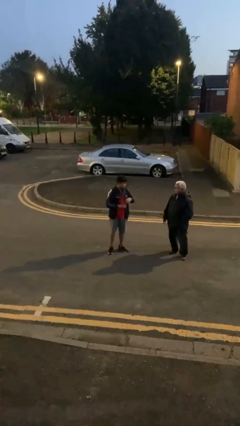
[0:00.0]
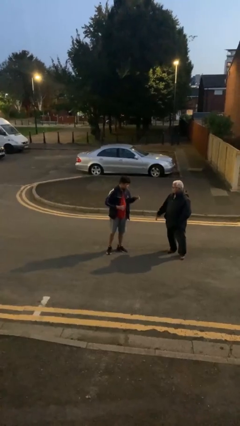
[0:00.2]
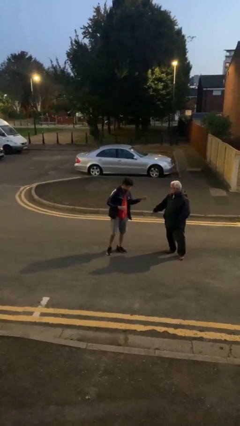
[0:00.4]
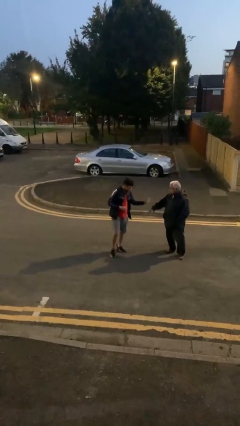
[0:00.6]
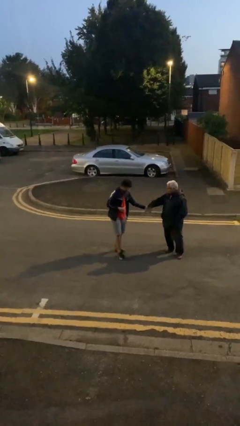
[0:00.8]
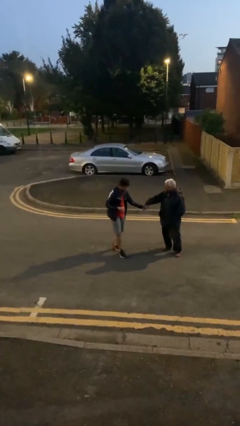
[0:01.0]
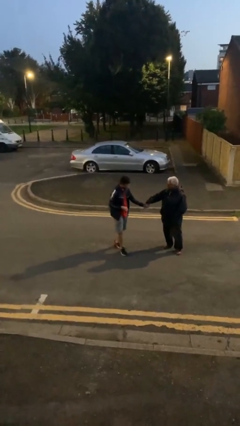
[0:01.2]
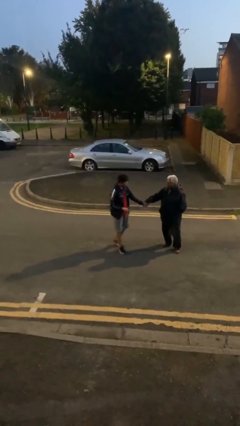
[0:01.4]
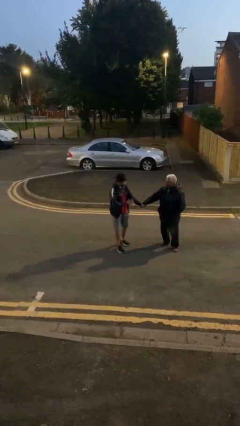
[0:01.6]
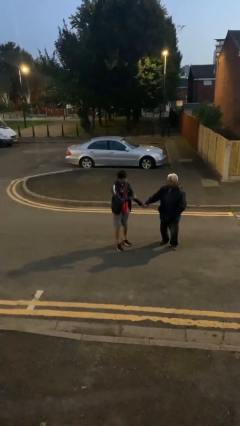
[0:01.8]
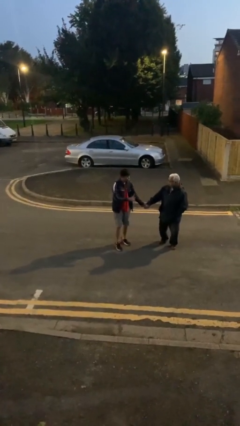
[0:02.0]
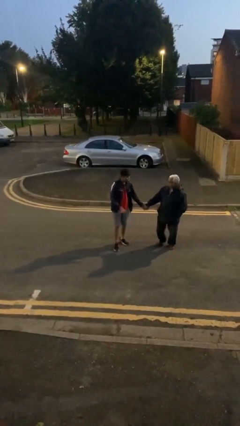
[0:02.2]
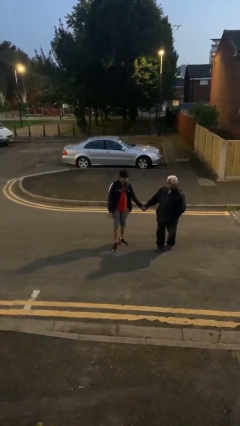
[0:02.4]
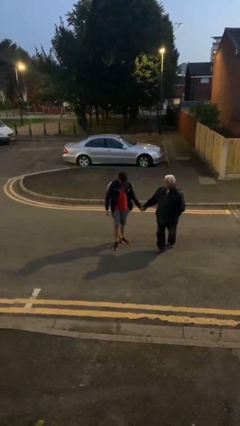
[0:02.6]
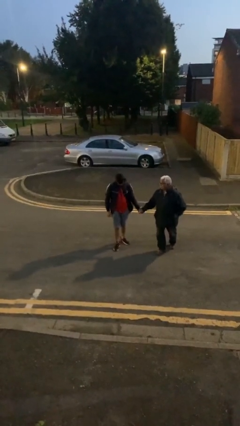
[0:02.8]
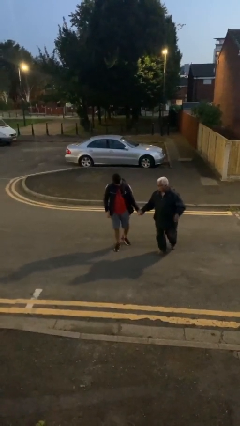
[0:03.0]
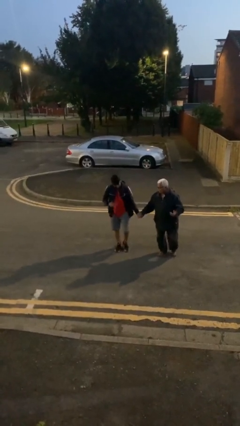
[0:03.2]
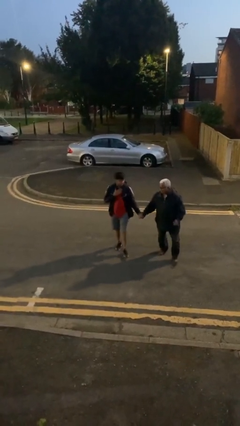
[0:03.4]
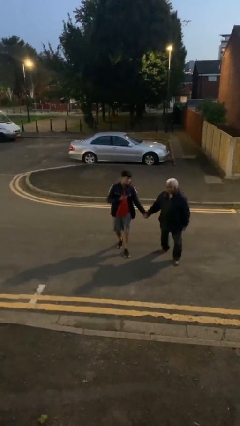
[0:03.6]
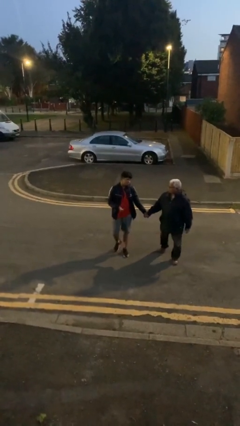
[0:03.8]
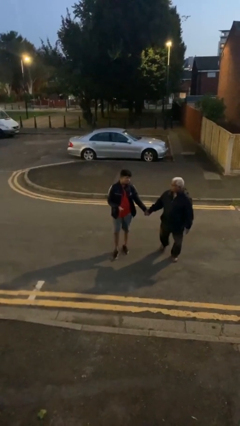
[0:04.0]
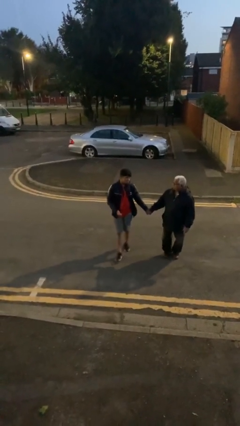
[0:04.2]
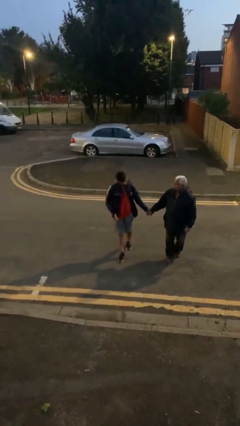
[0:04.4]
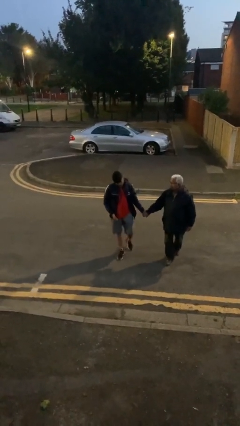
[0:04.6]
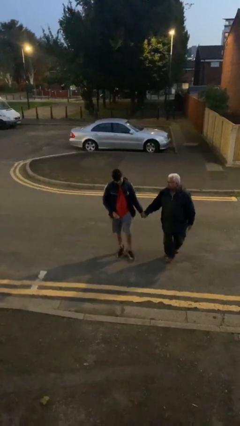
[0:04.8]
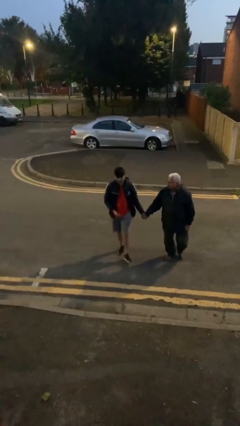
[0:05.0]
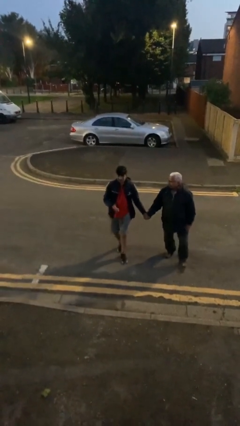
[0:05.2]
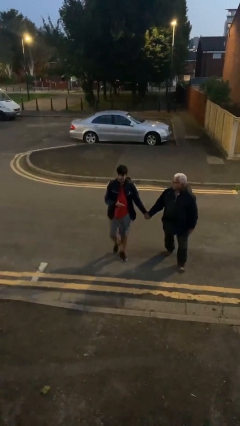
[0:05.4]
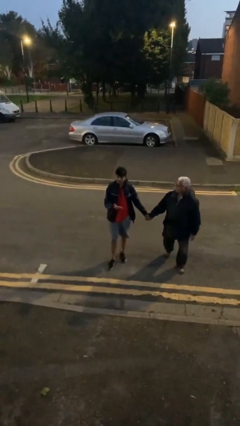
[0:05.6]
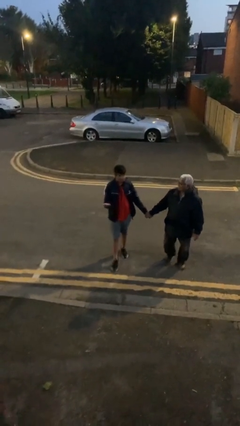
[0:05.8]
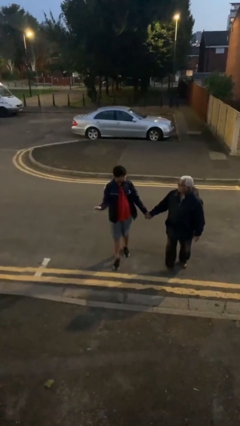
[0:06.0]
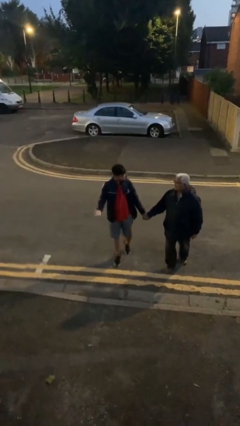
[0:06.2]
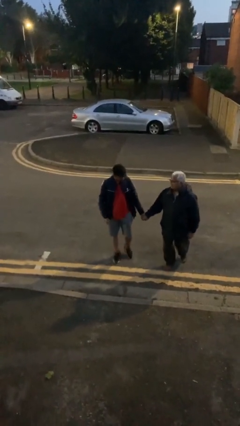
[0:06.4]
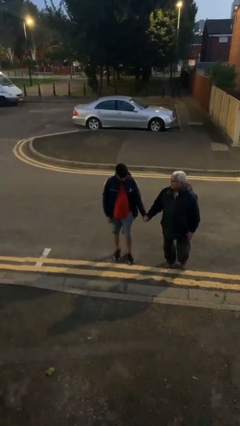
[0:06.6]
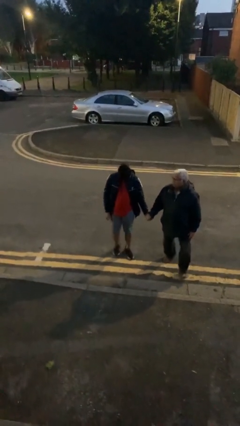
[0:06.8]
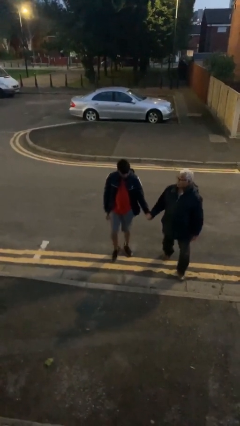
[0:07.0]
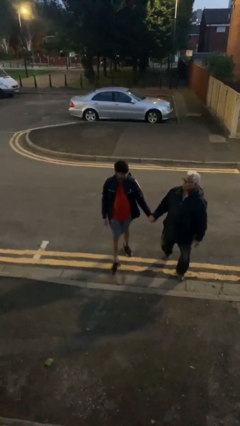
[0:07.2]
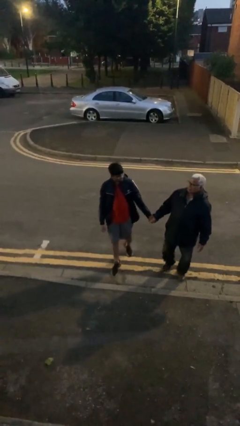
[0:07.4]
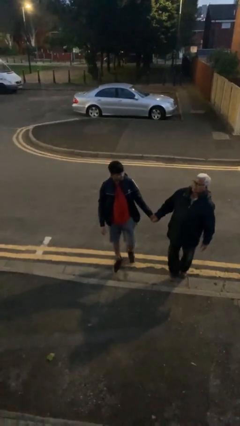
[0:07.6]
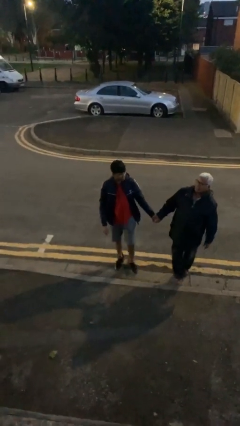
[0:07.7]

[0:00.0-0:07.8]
person holds hand

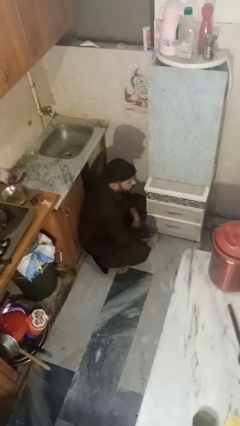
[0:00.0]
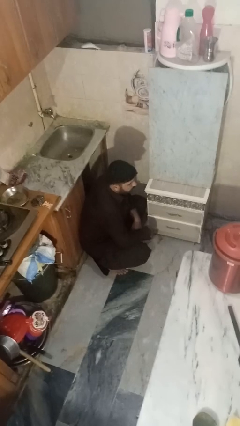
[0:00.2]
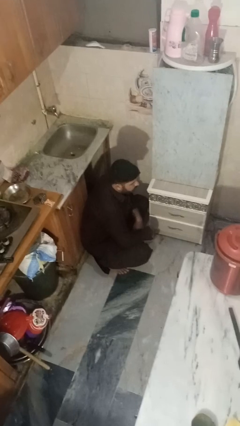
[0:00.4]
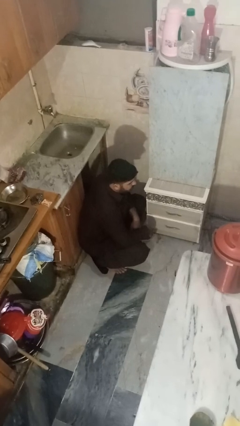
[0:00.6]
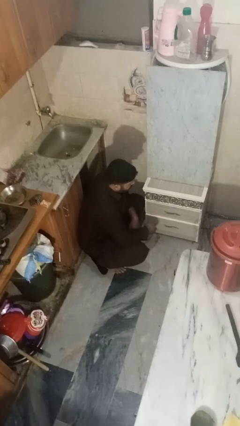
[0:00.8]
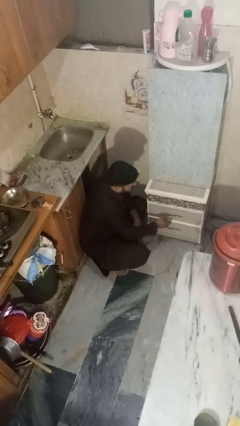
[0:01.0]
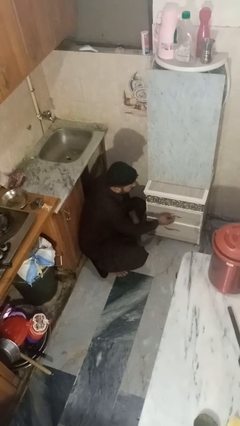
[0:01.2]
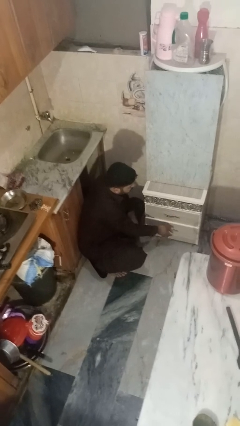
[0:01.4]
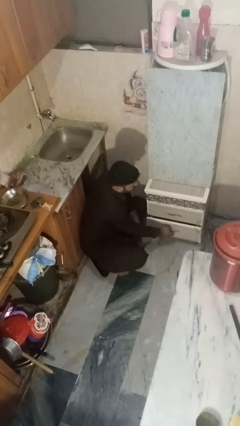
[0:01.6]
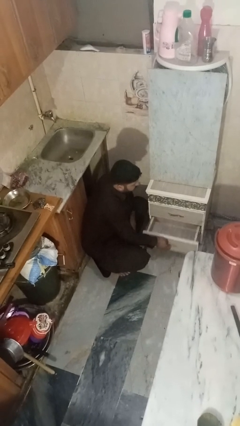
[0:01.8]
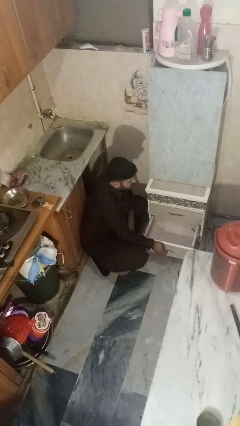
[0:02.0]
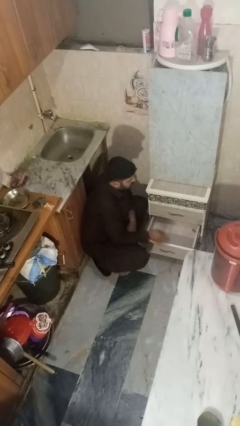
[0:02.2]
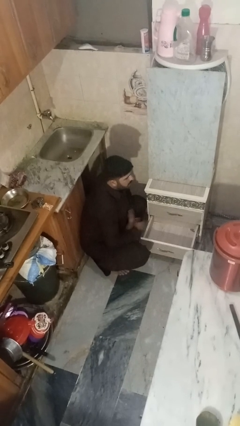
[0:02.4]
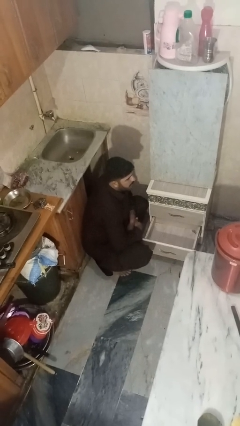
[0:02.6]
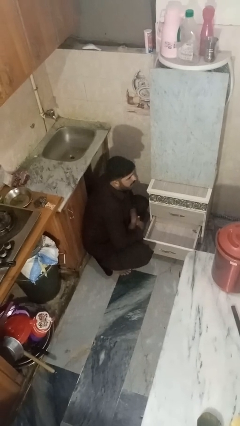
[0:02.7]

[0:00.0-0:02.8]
person opens kitchen drawer

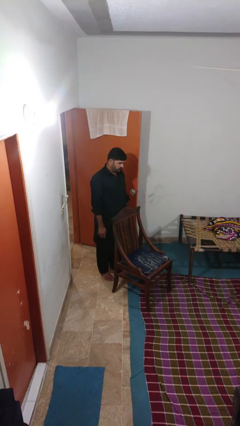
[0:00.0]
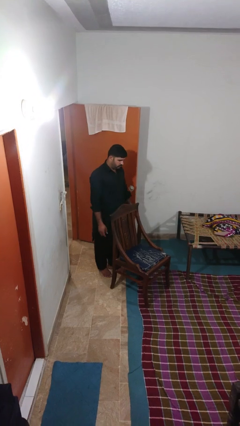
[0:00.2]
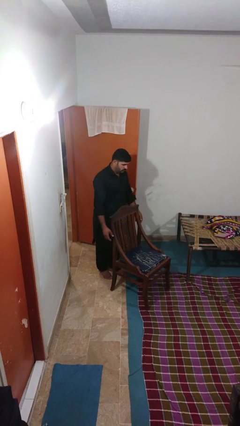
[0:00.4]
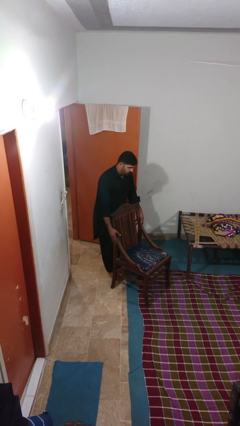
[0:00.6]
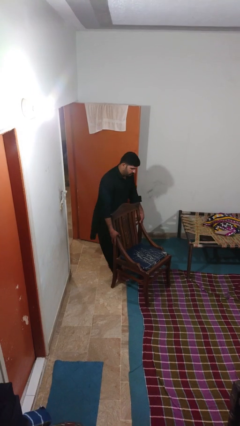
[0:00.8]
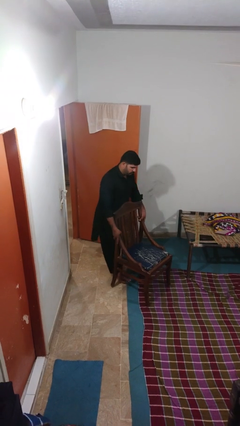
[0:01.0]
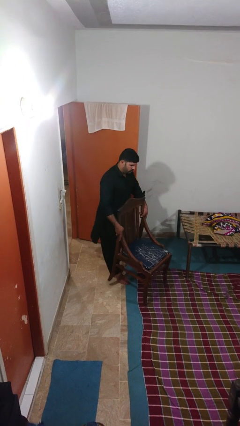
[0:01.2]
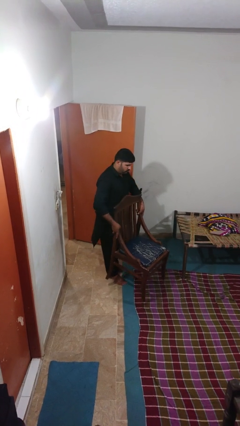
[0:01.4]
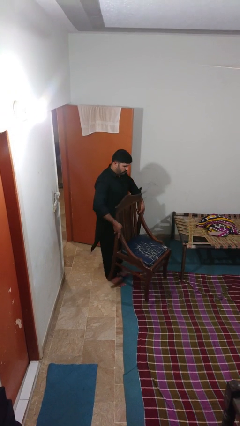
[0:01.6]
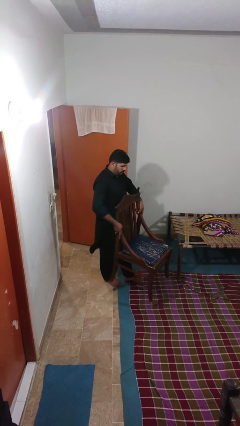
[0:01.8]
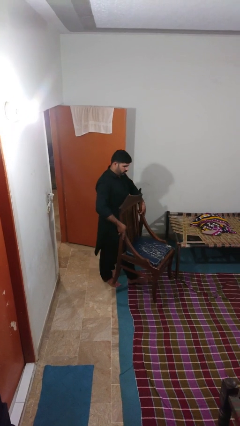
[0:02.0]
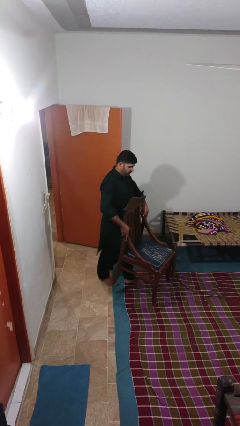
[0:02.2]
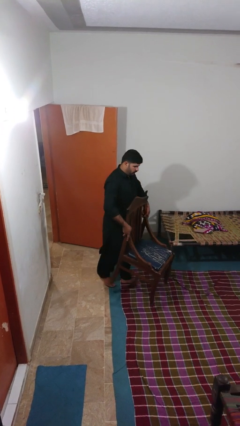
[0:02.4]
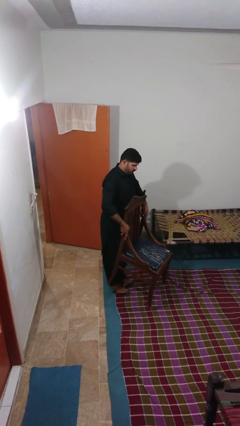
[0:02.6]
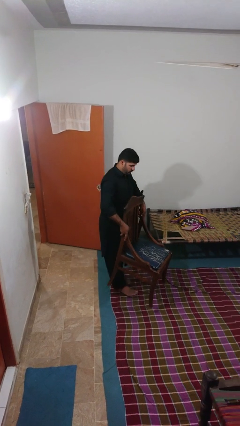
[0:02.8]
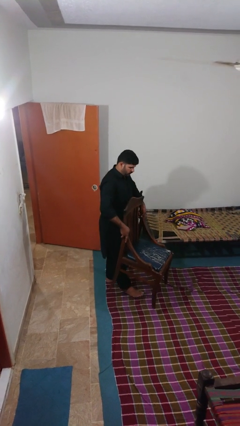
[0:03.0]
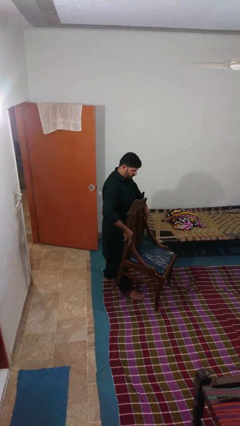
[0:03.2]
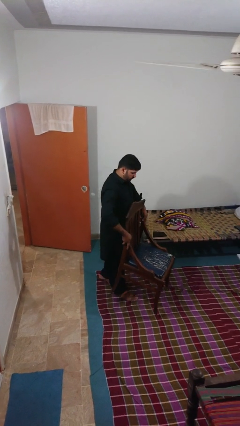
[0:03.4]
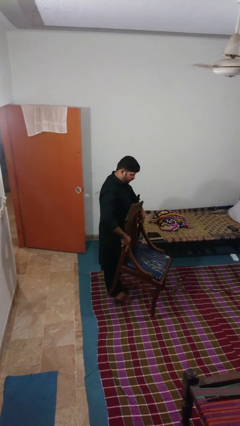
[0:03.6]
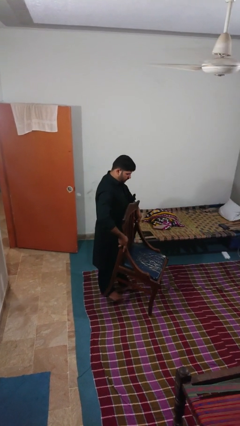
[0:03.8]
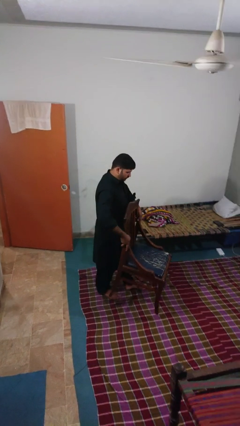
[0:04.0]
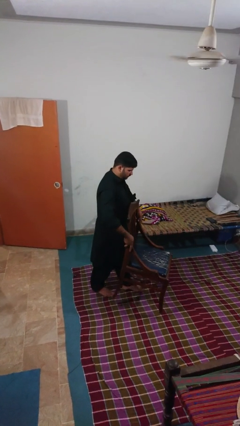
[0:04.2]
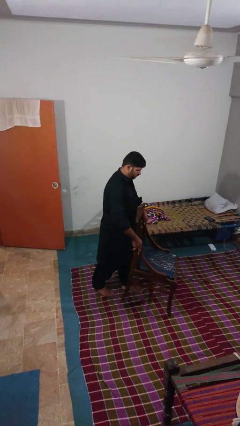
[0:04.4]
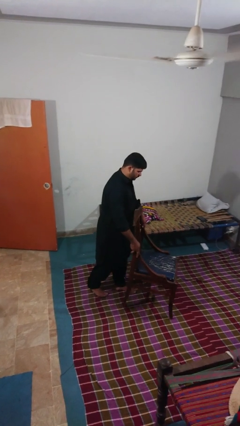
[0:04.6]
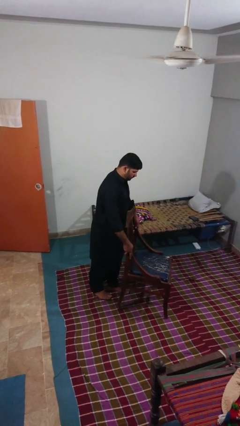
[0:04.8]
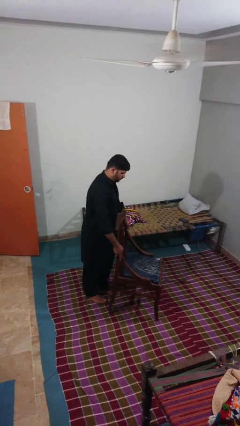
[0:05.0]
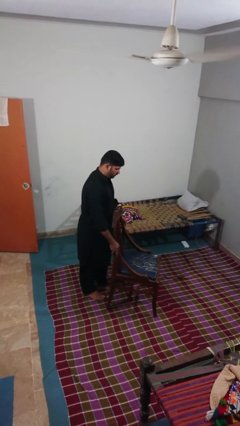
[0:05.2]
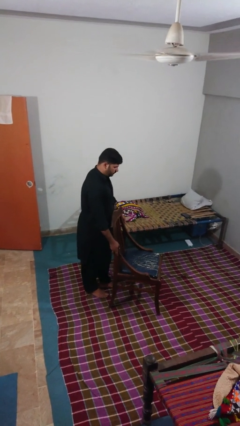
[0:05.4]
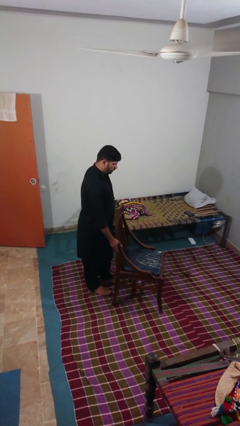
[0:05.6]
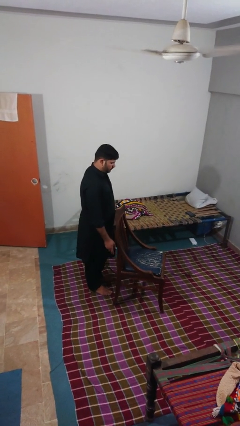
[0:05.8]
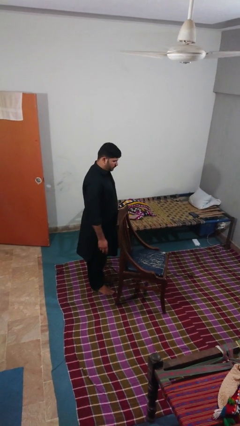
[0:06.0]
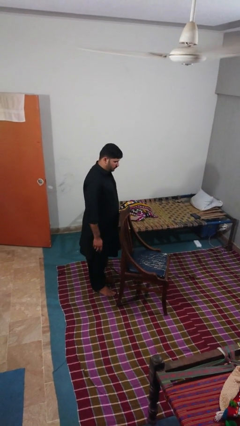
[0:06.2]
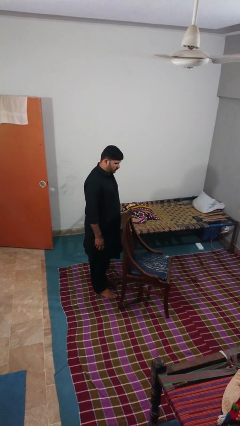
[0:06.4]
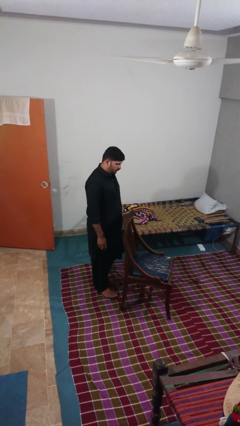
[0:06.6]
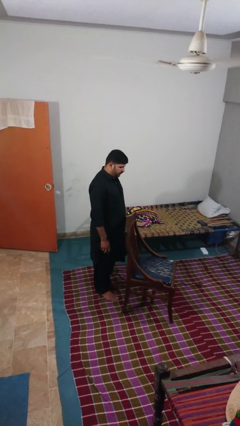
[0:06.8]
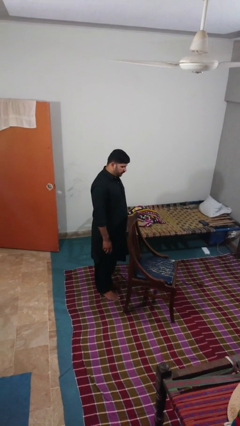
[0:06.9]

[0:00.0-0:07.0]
person carries furniture

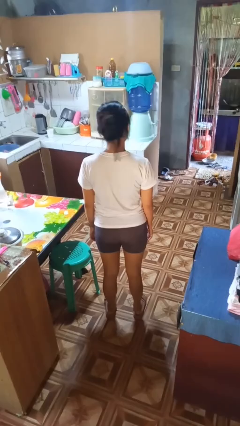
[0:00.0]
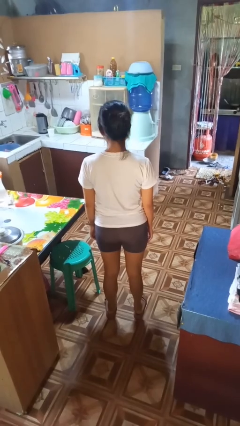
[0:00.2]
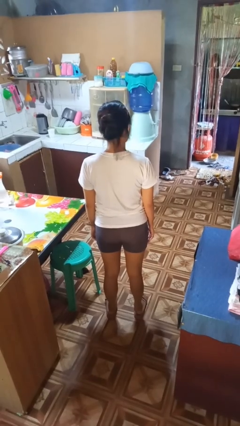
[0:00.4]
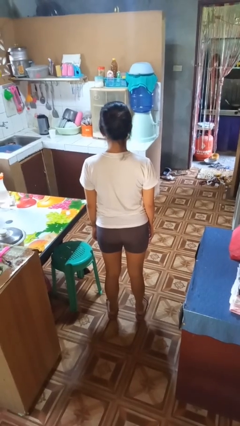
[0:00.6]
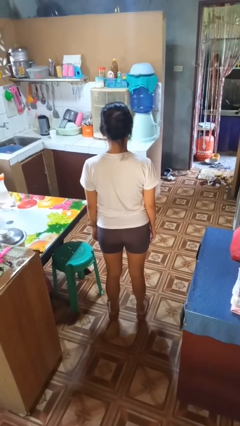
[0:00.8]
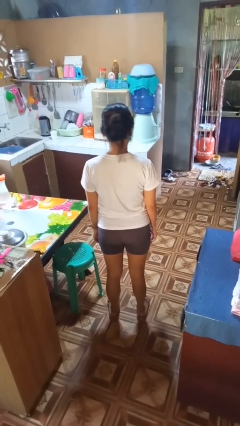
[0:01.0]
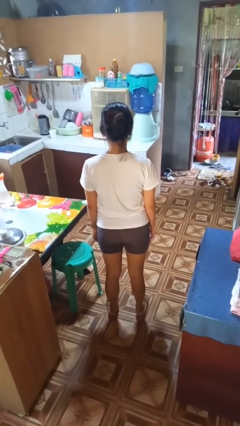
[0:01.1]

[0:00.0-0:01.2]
person shakes head
